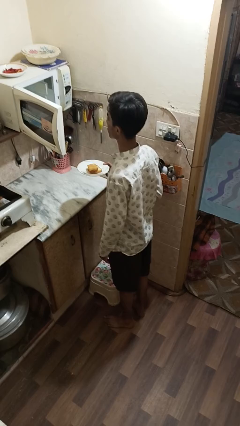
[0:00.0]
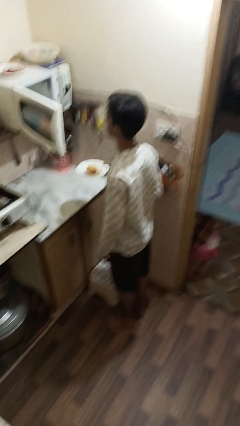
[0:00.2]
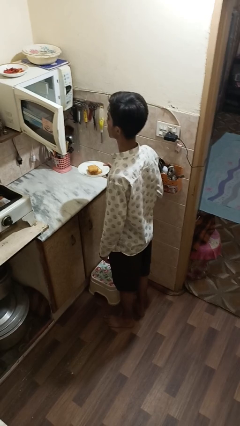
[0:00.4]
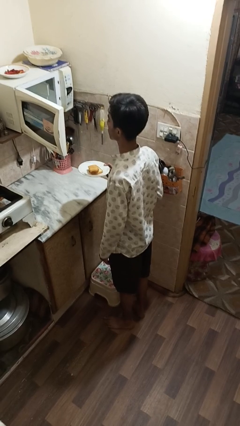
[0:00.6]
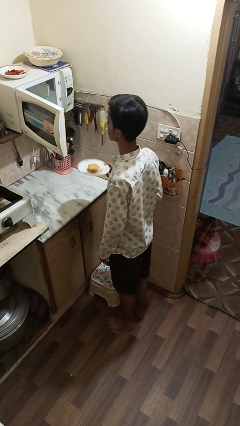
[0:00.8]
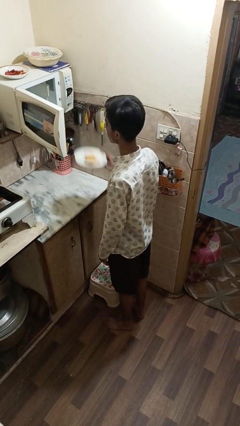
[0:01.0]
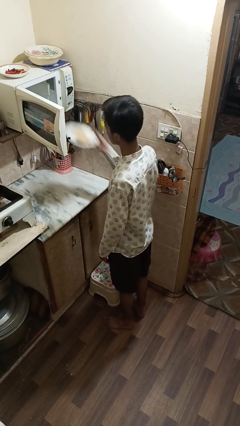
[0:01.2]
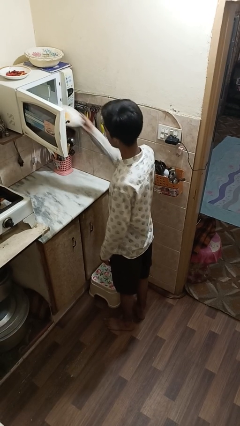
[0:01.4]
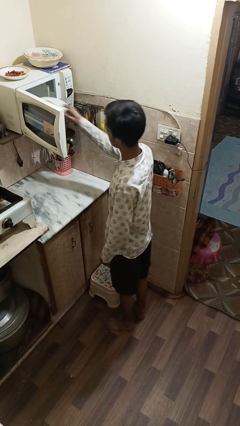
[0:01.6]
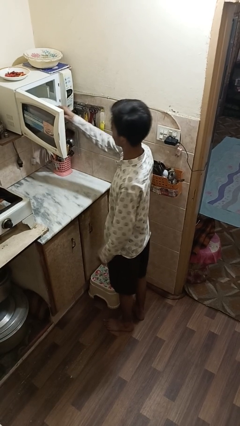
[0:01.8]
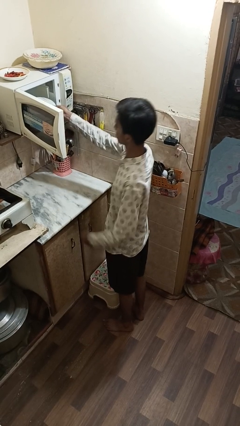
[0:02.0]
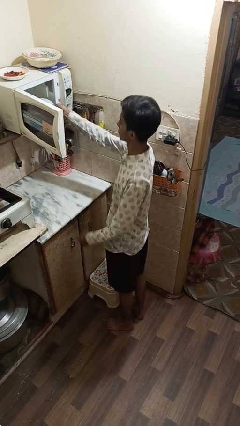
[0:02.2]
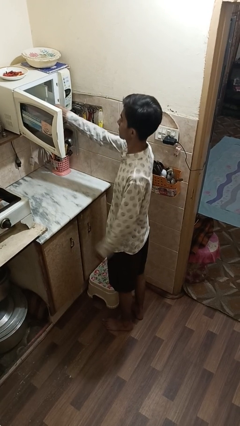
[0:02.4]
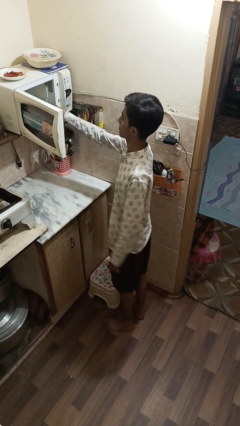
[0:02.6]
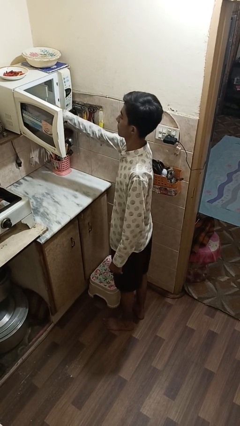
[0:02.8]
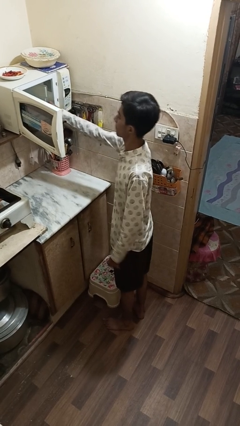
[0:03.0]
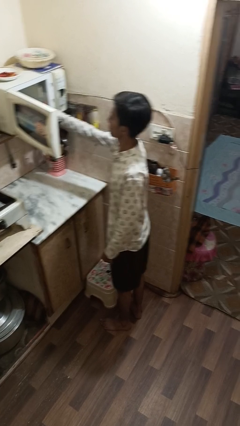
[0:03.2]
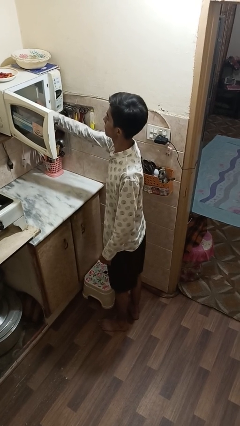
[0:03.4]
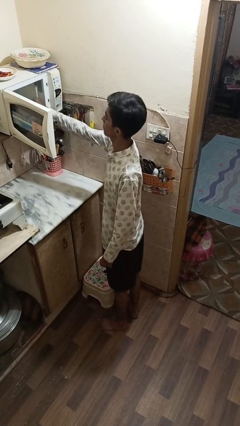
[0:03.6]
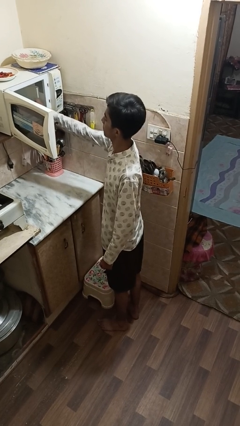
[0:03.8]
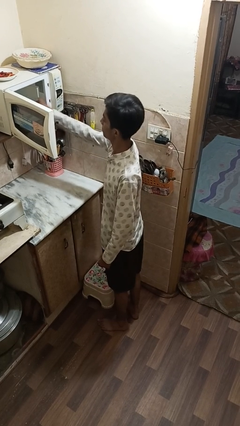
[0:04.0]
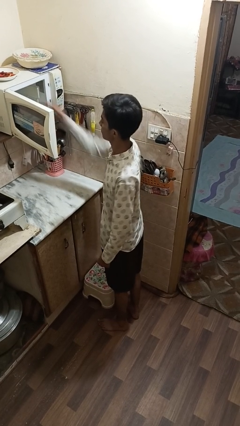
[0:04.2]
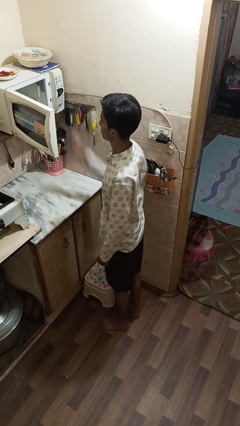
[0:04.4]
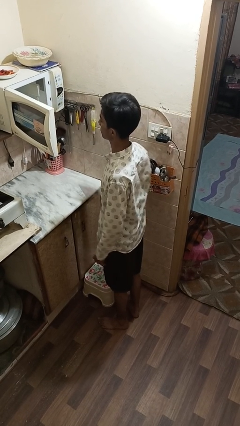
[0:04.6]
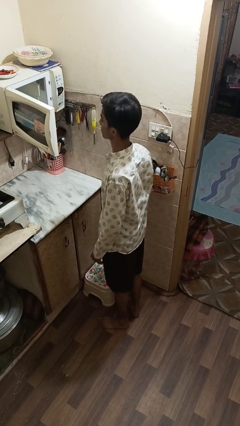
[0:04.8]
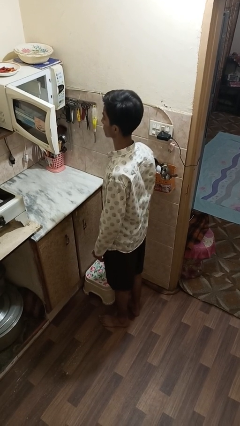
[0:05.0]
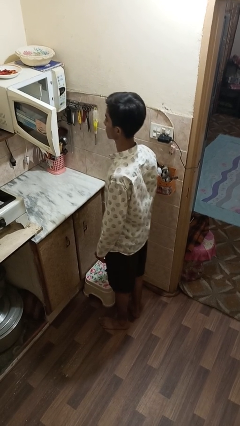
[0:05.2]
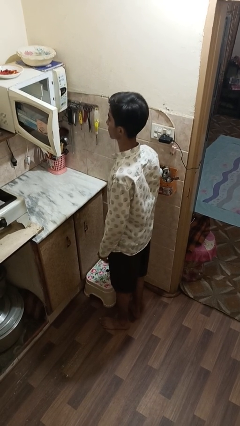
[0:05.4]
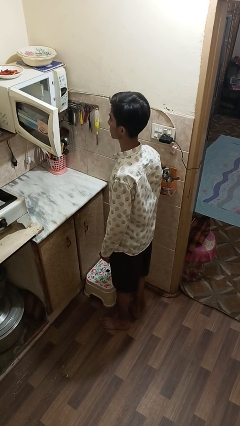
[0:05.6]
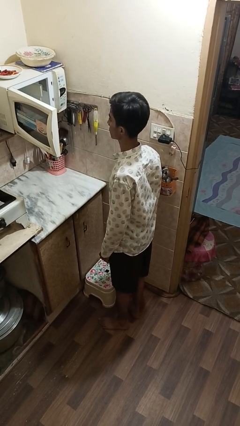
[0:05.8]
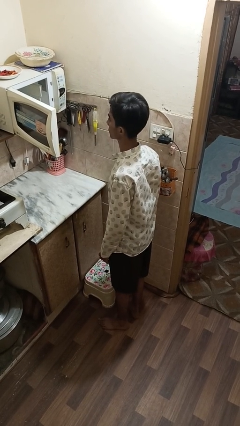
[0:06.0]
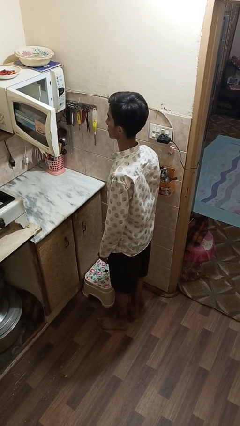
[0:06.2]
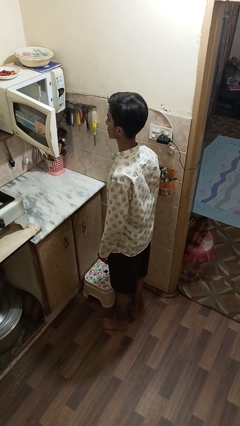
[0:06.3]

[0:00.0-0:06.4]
person puts object into microwave

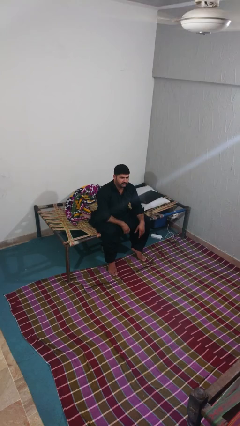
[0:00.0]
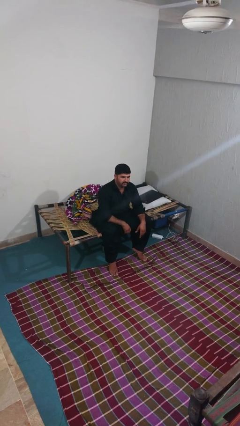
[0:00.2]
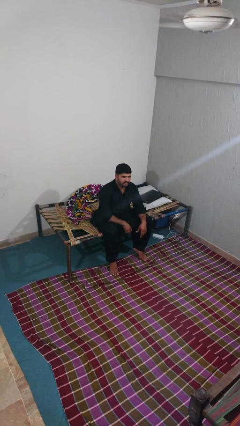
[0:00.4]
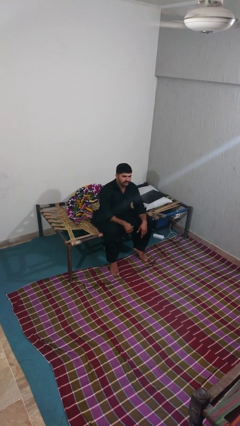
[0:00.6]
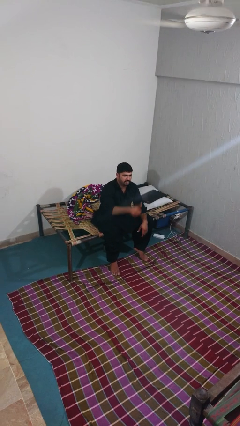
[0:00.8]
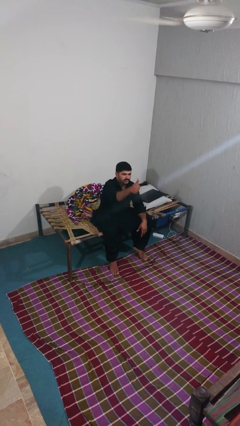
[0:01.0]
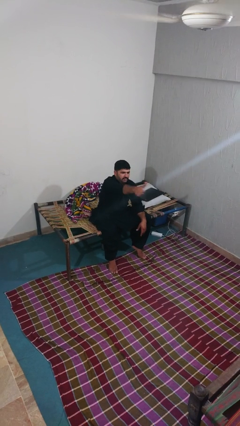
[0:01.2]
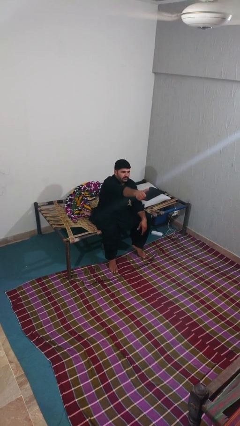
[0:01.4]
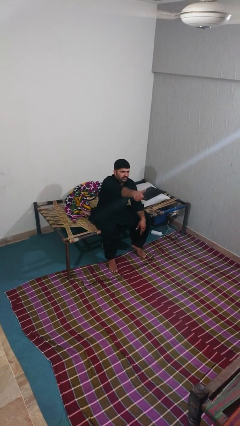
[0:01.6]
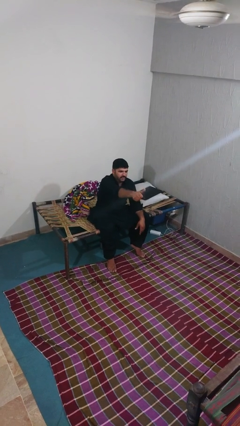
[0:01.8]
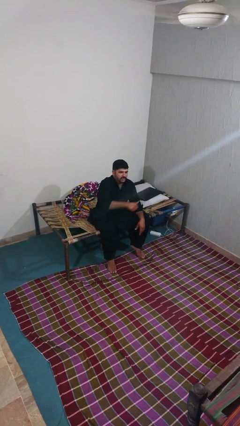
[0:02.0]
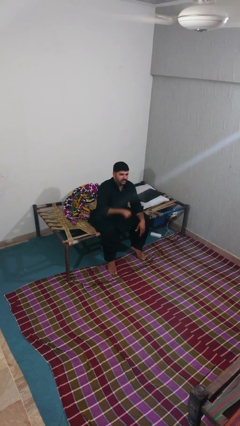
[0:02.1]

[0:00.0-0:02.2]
person gestures thumbs up

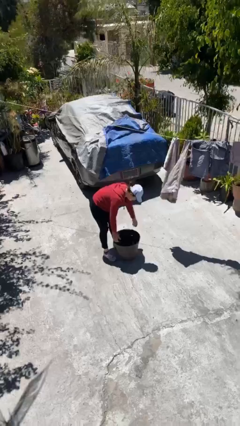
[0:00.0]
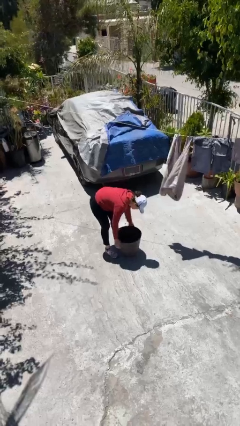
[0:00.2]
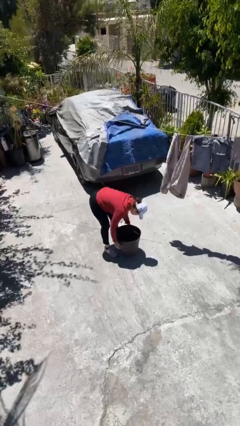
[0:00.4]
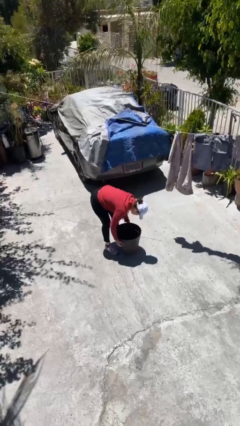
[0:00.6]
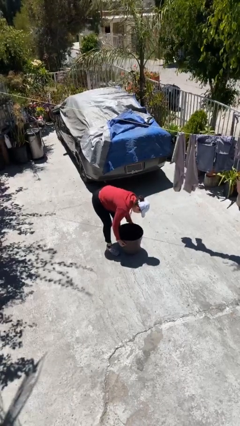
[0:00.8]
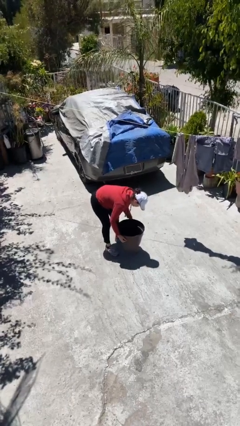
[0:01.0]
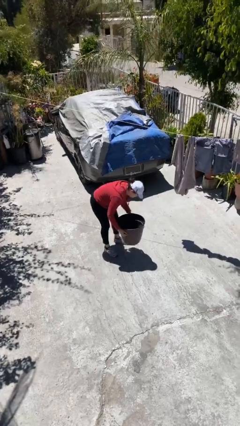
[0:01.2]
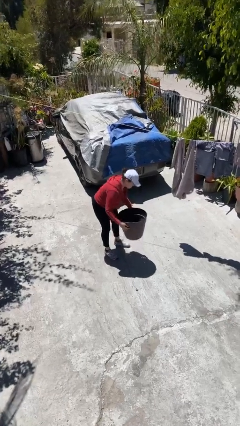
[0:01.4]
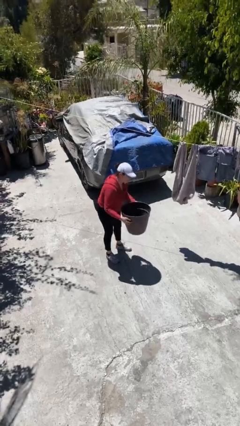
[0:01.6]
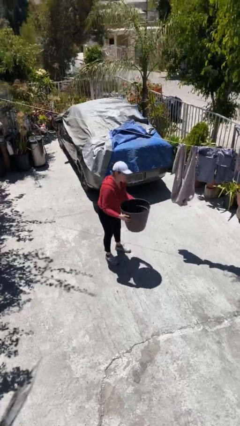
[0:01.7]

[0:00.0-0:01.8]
person picks up object from floor

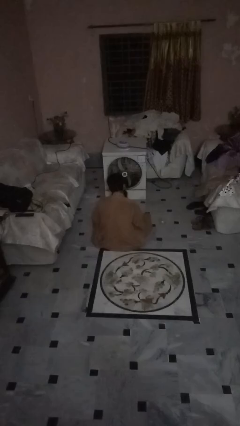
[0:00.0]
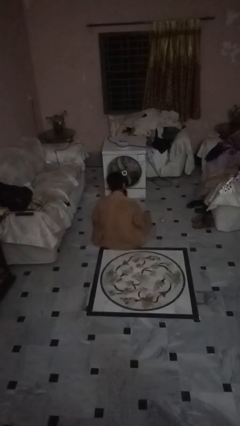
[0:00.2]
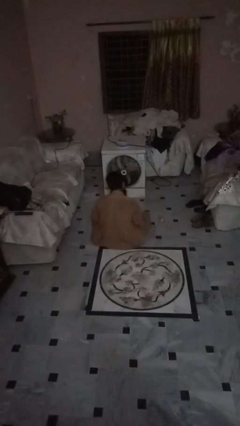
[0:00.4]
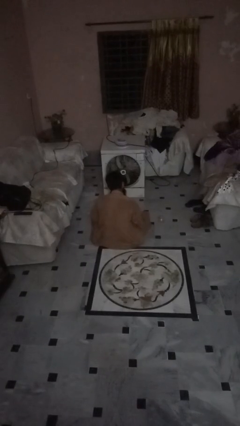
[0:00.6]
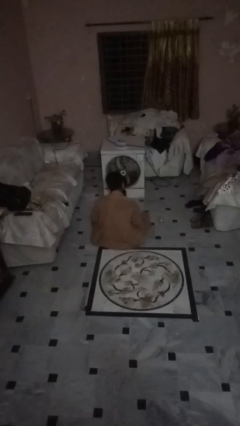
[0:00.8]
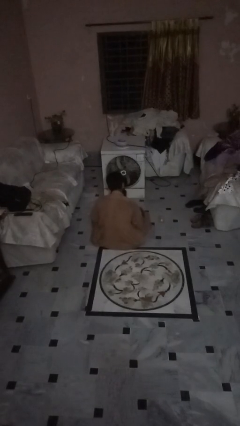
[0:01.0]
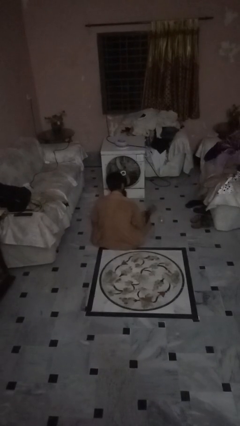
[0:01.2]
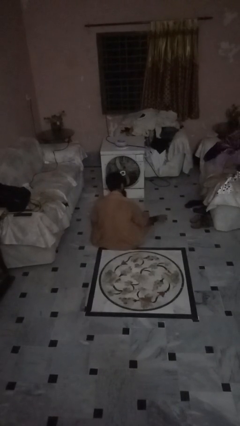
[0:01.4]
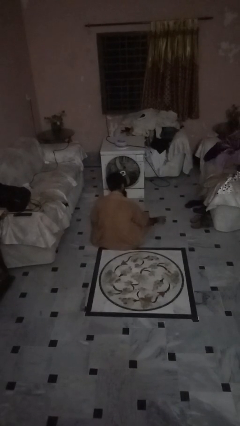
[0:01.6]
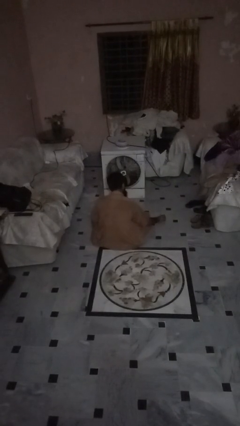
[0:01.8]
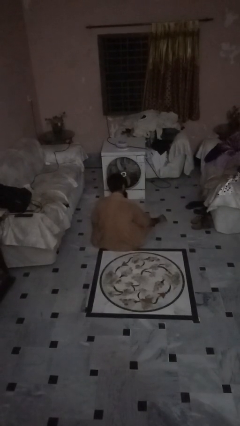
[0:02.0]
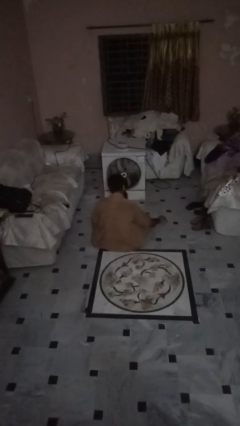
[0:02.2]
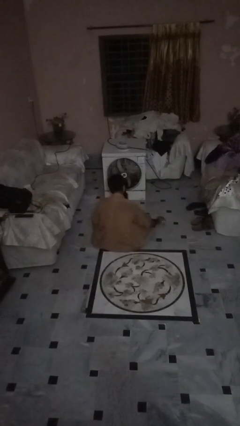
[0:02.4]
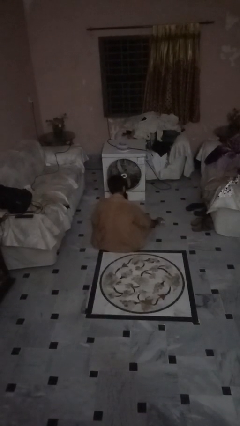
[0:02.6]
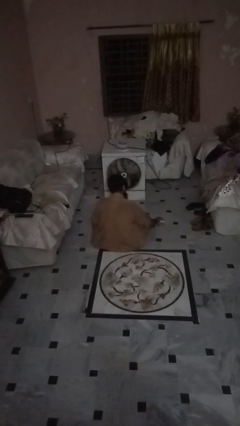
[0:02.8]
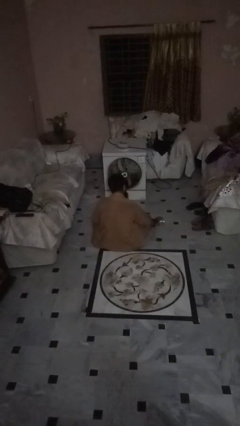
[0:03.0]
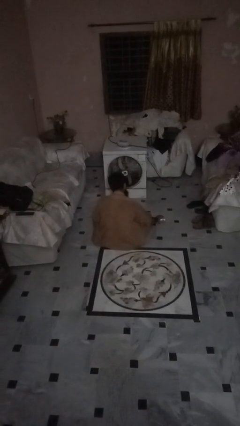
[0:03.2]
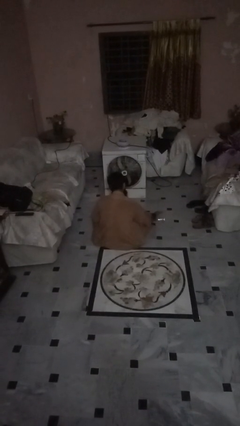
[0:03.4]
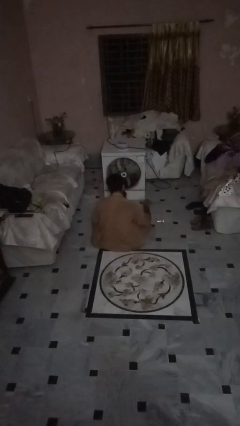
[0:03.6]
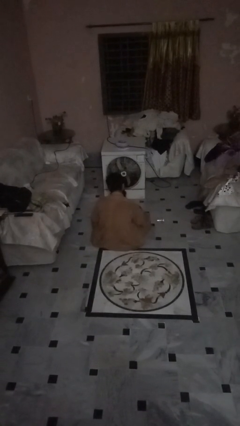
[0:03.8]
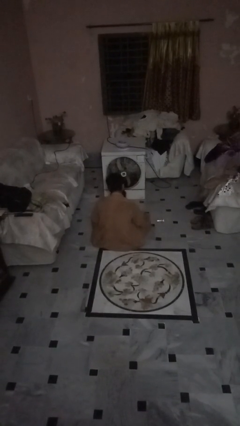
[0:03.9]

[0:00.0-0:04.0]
person spills on floor

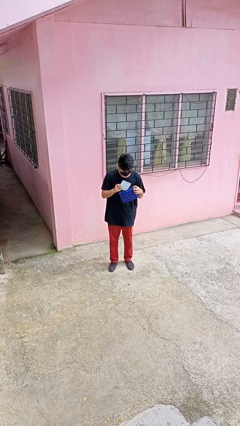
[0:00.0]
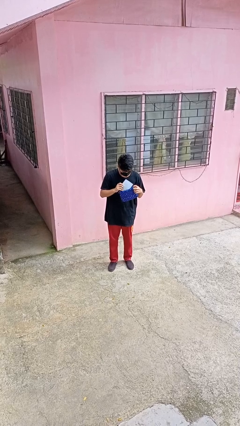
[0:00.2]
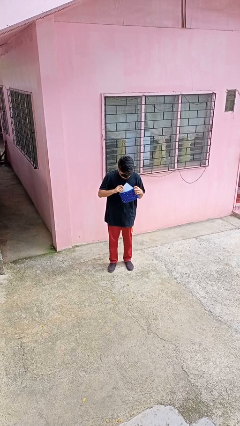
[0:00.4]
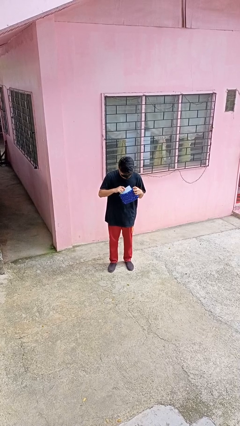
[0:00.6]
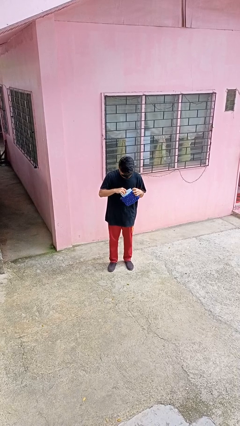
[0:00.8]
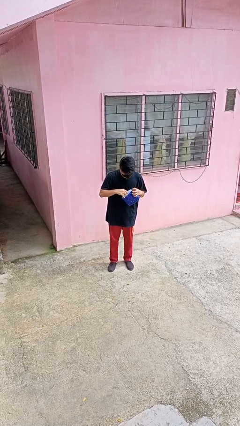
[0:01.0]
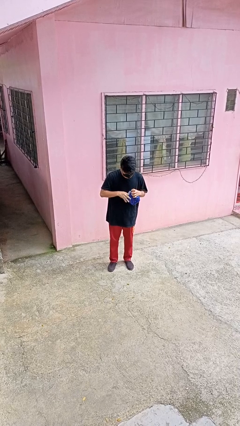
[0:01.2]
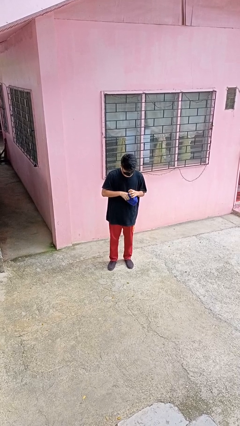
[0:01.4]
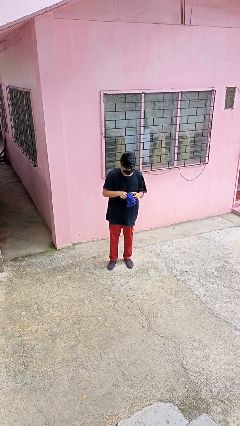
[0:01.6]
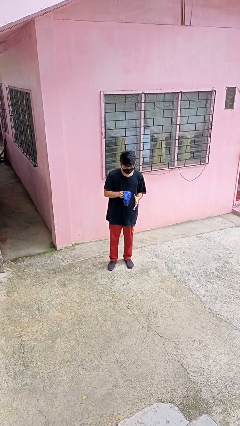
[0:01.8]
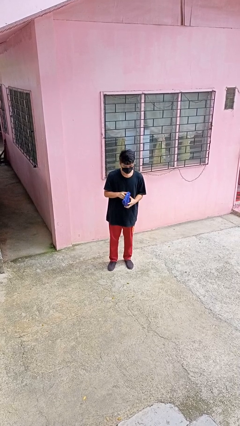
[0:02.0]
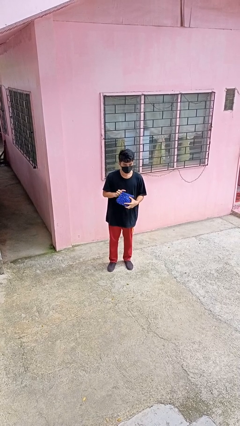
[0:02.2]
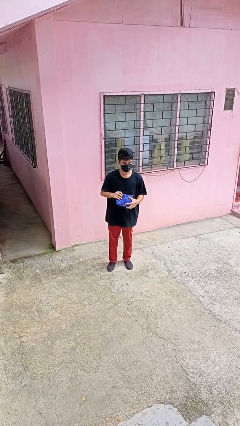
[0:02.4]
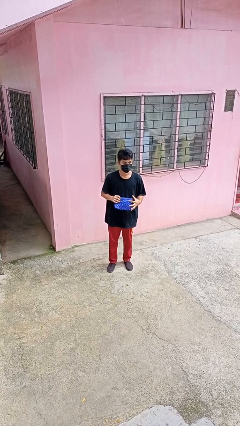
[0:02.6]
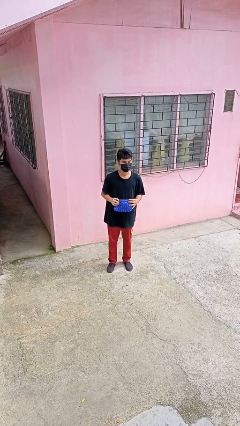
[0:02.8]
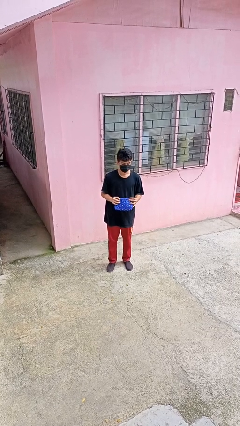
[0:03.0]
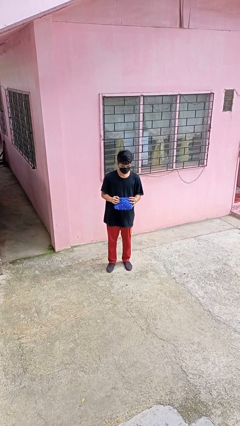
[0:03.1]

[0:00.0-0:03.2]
person puts object into purse

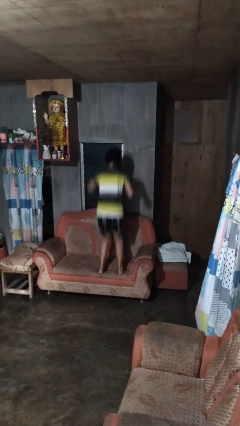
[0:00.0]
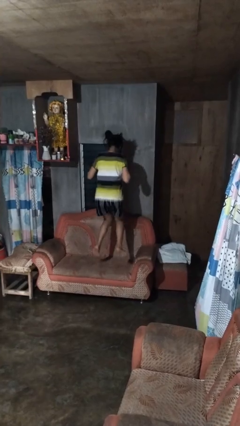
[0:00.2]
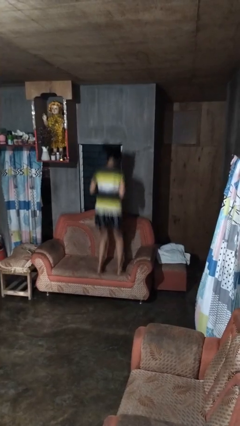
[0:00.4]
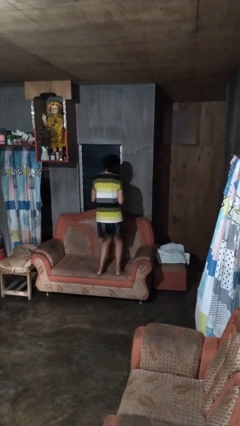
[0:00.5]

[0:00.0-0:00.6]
person jumps on couch
